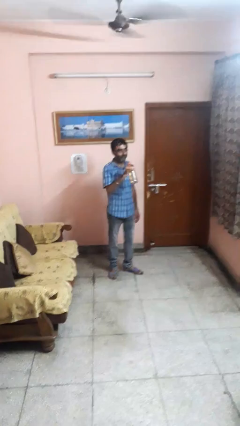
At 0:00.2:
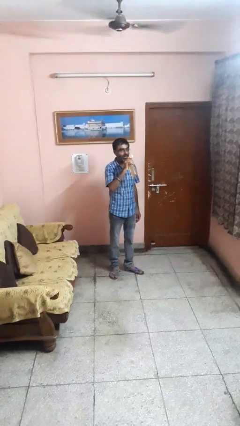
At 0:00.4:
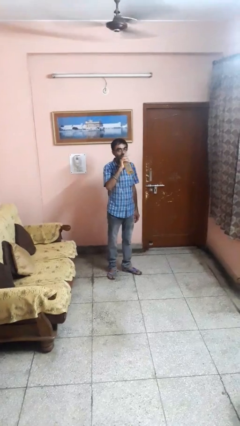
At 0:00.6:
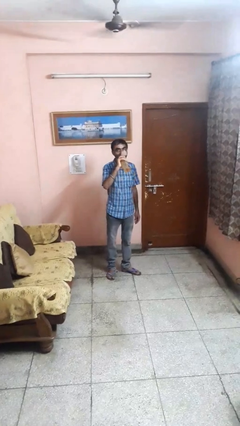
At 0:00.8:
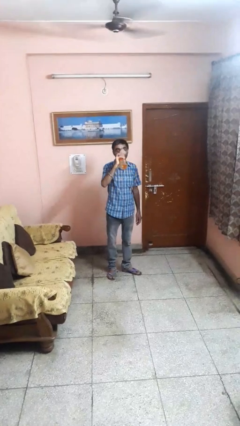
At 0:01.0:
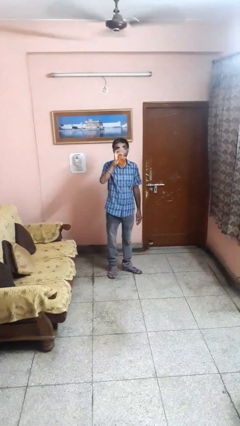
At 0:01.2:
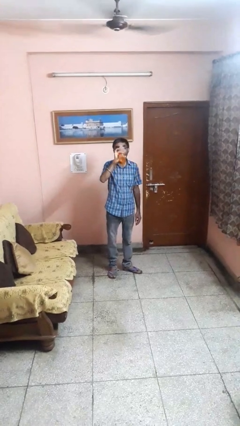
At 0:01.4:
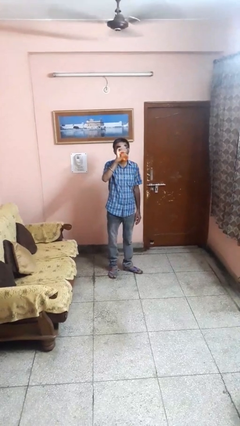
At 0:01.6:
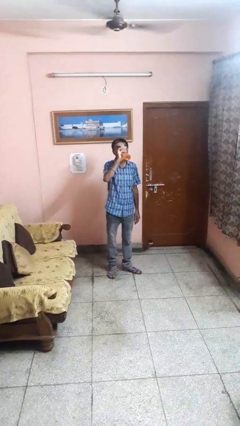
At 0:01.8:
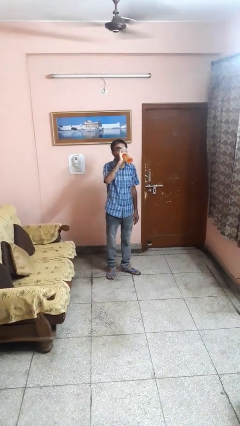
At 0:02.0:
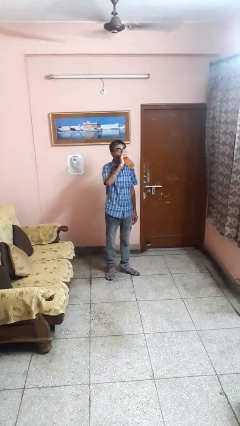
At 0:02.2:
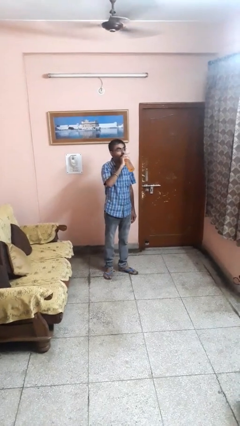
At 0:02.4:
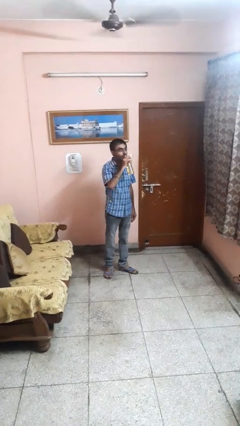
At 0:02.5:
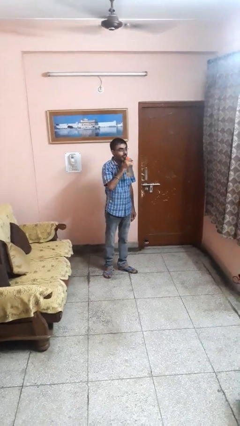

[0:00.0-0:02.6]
person drinks from bottle

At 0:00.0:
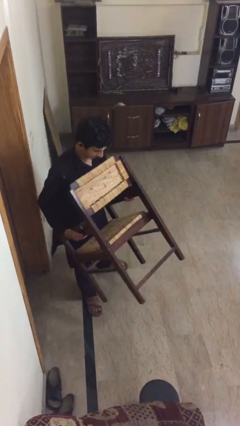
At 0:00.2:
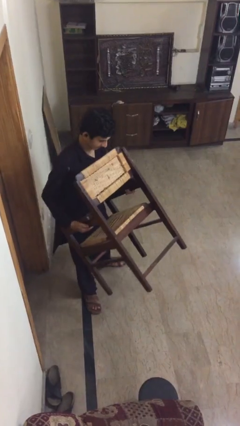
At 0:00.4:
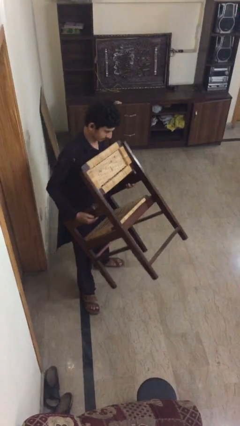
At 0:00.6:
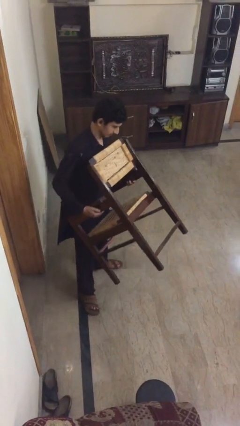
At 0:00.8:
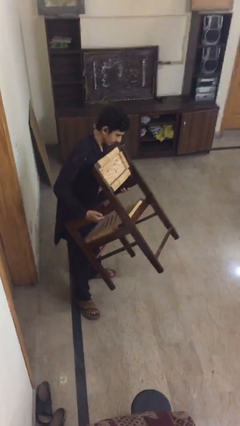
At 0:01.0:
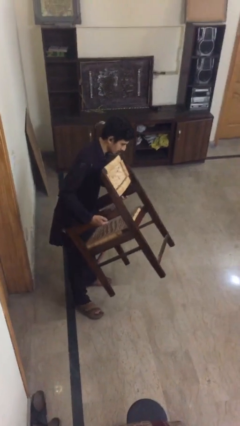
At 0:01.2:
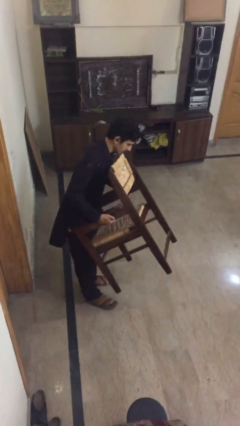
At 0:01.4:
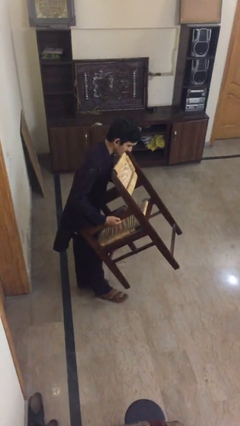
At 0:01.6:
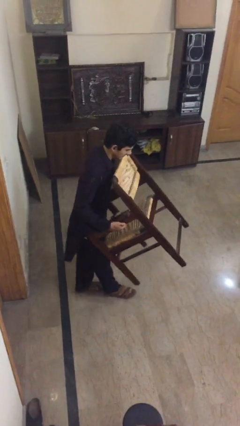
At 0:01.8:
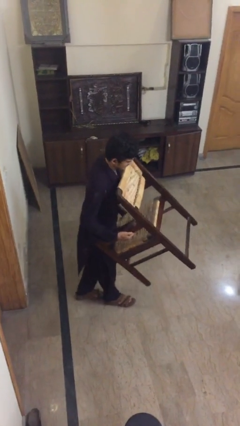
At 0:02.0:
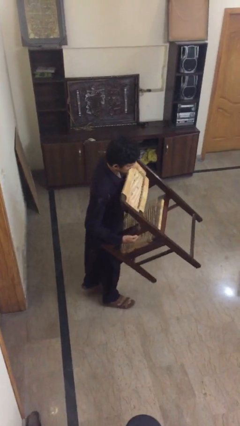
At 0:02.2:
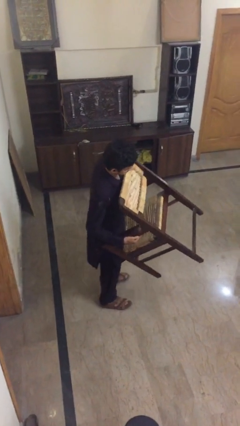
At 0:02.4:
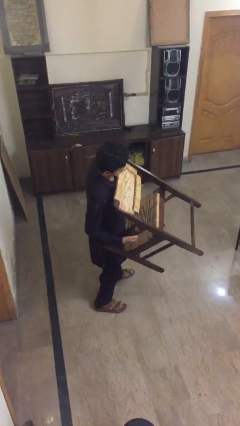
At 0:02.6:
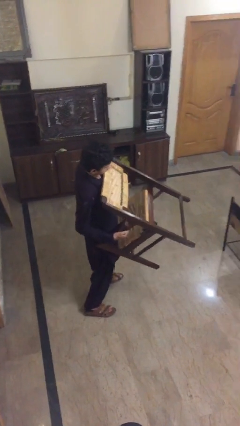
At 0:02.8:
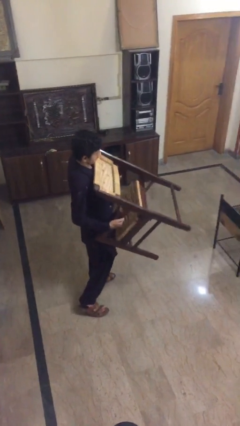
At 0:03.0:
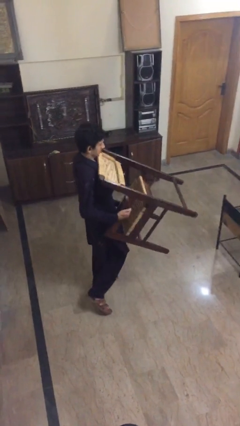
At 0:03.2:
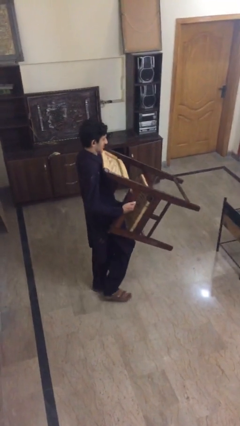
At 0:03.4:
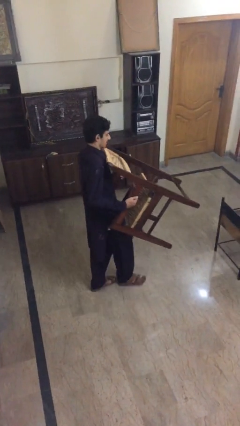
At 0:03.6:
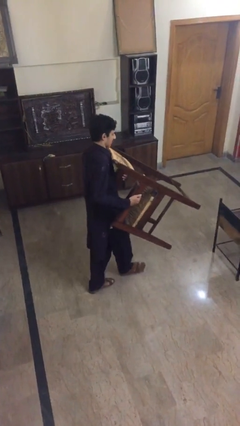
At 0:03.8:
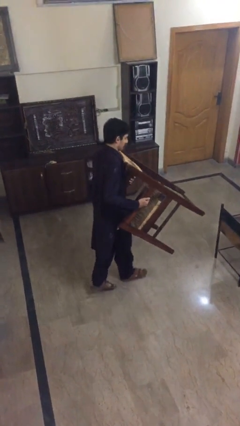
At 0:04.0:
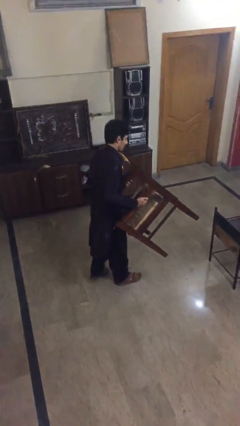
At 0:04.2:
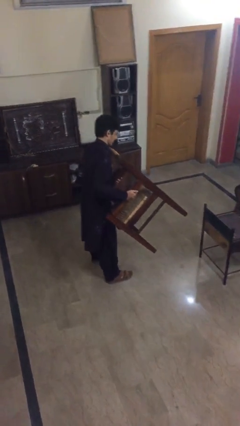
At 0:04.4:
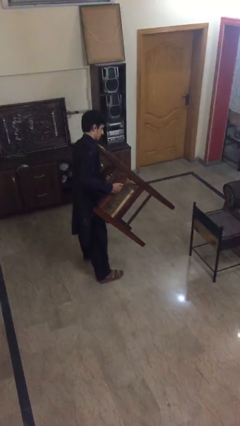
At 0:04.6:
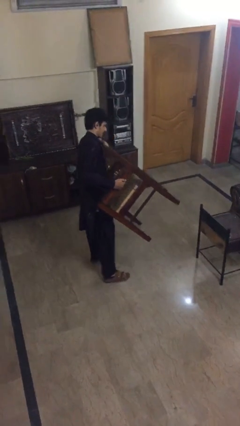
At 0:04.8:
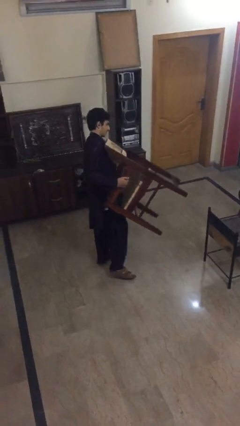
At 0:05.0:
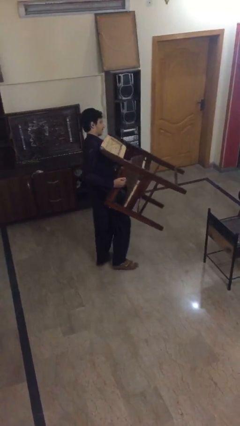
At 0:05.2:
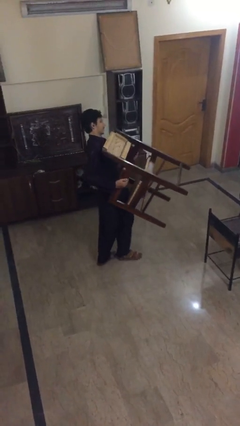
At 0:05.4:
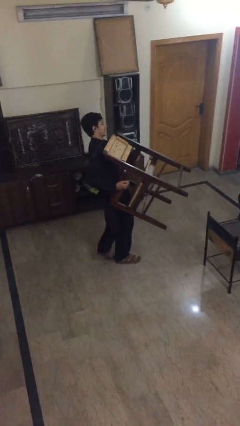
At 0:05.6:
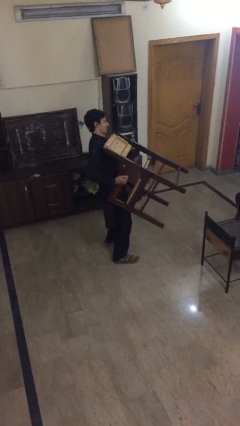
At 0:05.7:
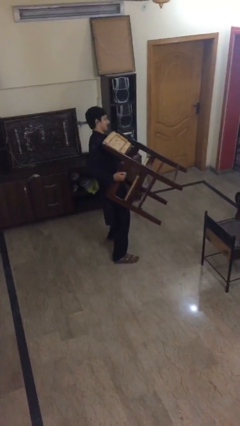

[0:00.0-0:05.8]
person carries heavy object

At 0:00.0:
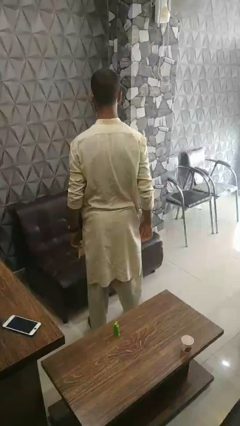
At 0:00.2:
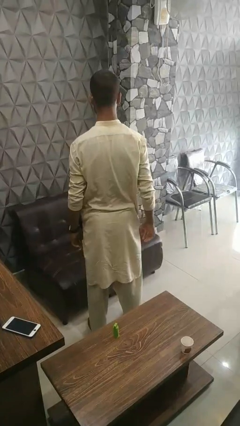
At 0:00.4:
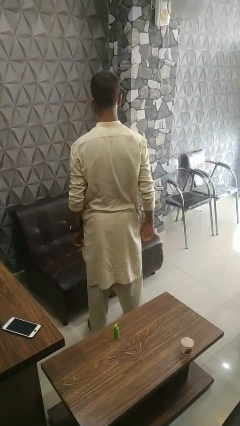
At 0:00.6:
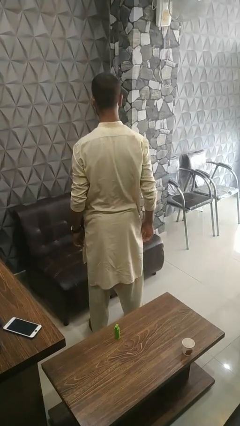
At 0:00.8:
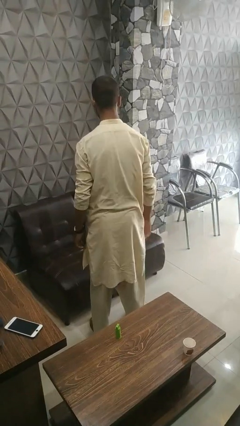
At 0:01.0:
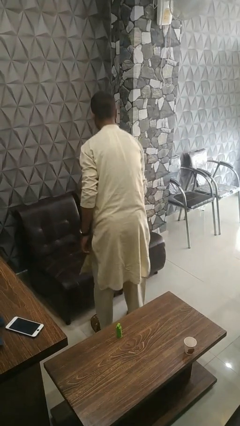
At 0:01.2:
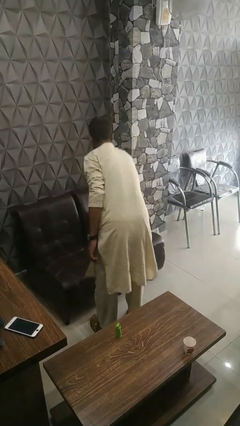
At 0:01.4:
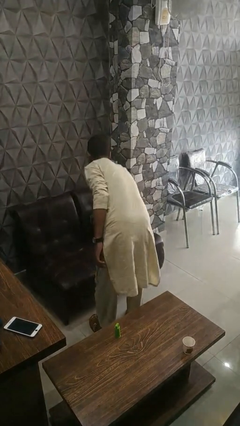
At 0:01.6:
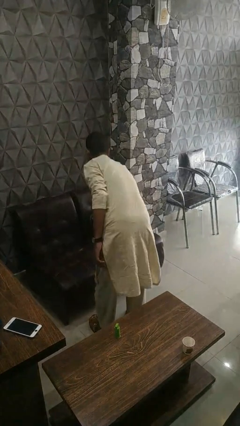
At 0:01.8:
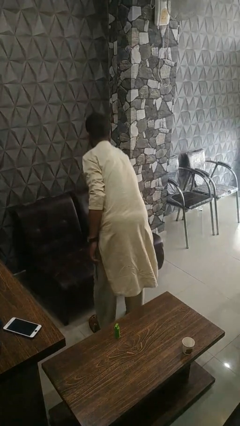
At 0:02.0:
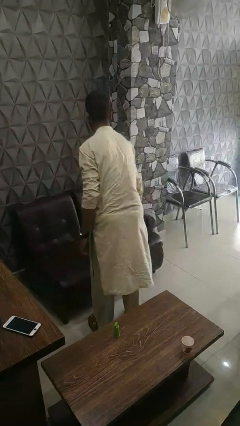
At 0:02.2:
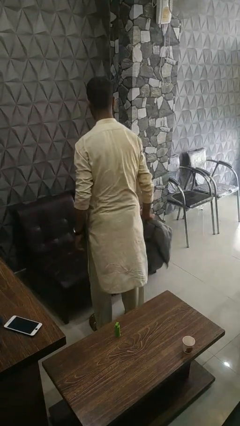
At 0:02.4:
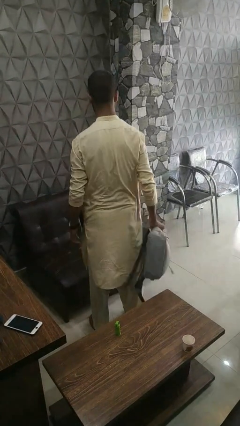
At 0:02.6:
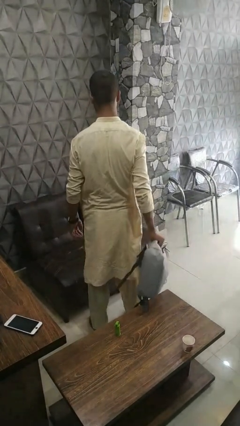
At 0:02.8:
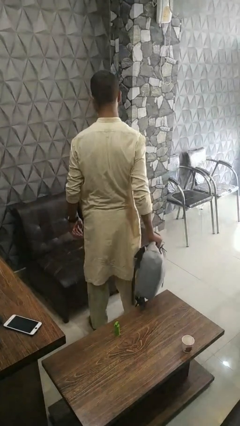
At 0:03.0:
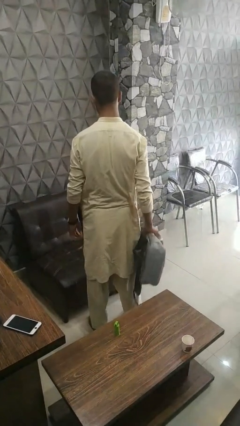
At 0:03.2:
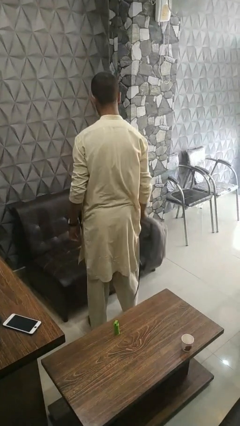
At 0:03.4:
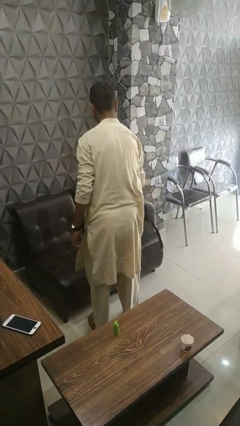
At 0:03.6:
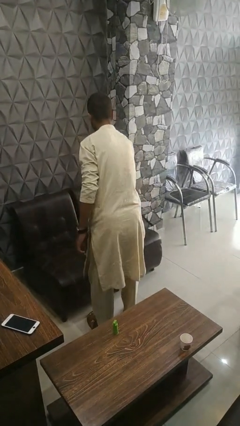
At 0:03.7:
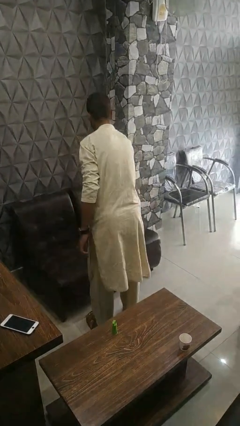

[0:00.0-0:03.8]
person searches in couch

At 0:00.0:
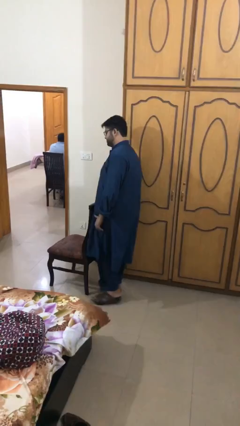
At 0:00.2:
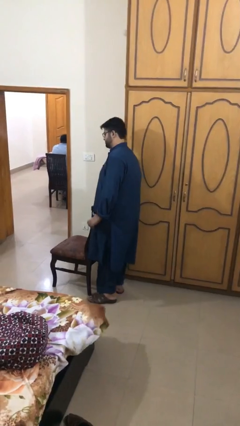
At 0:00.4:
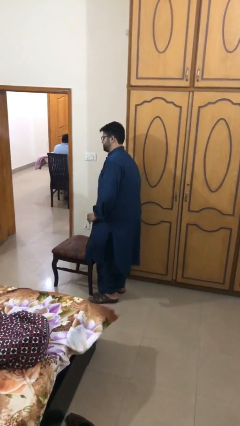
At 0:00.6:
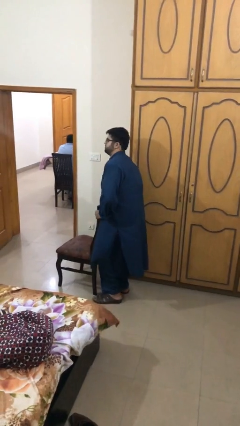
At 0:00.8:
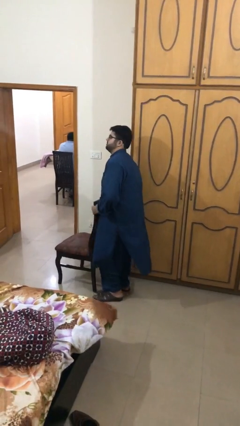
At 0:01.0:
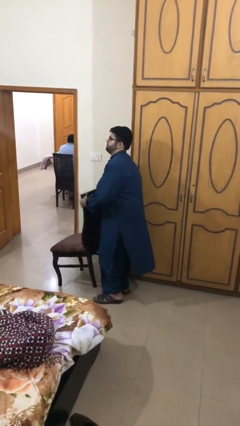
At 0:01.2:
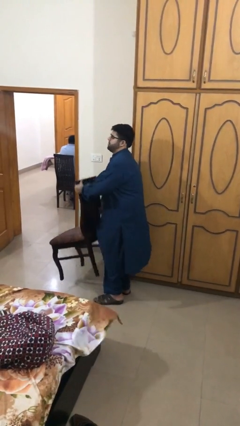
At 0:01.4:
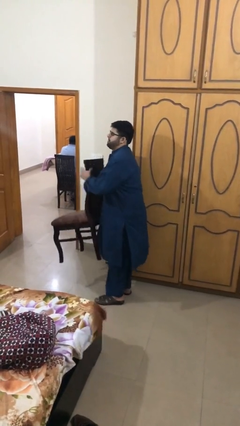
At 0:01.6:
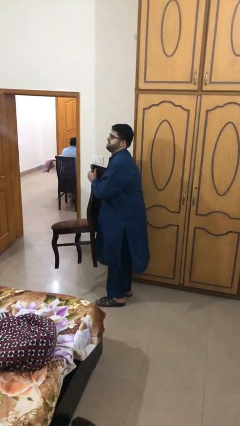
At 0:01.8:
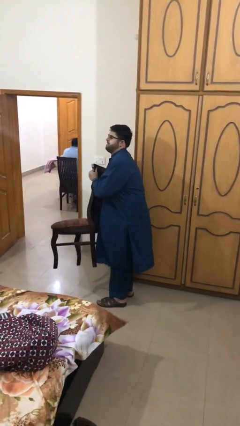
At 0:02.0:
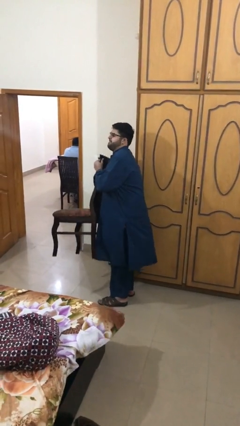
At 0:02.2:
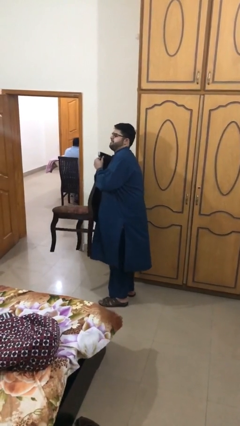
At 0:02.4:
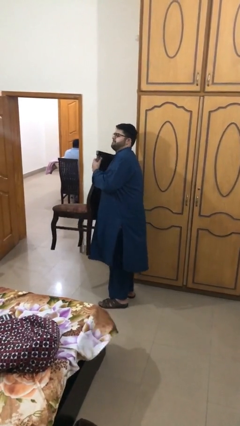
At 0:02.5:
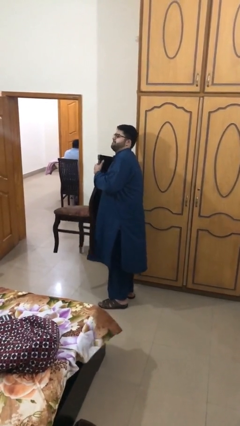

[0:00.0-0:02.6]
person picks up object from floor

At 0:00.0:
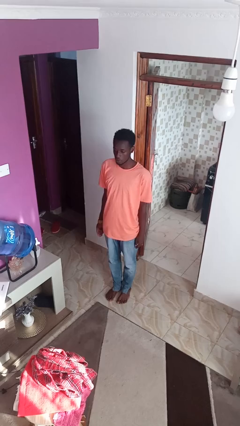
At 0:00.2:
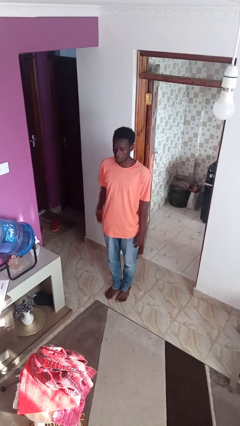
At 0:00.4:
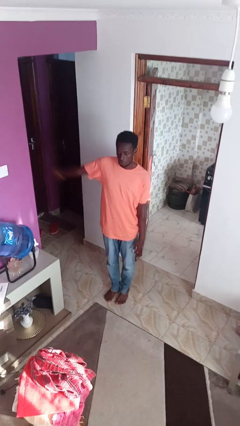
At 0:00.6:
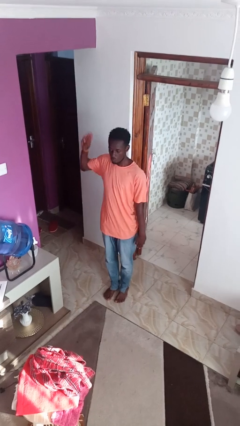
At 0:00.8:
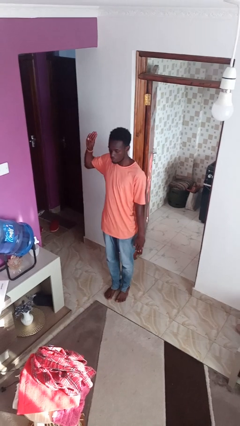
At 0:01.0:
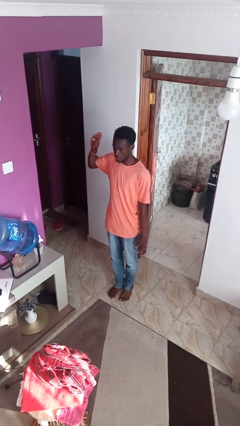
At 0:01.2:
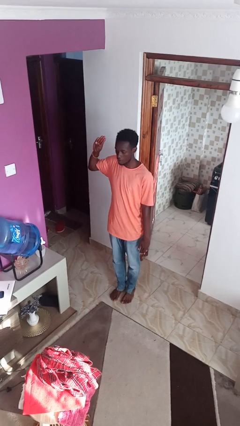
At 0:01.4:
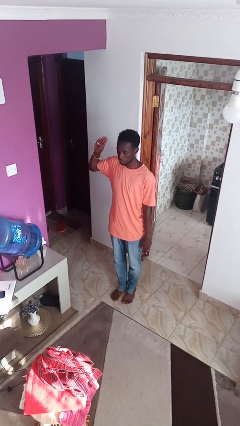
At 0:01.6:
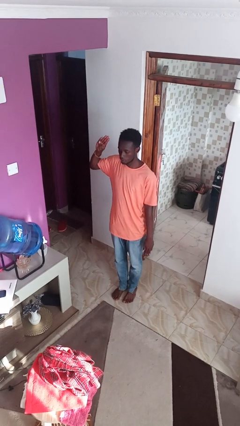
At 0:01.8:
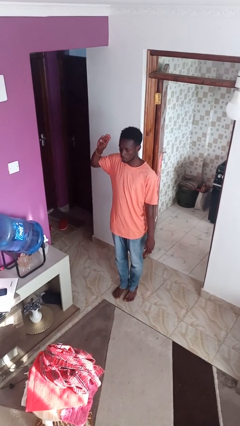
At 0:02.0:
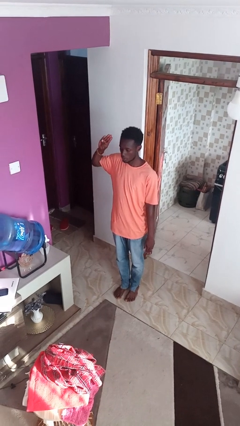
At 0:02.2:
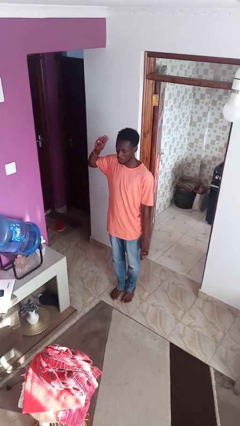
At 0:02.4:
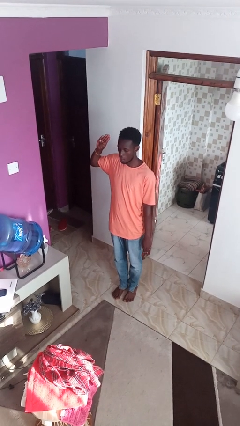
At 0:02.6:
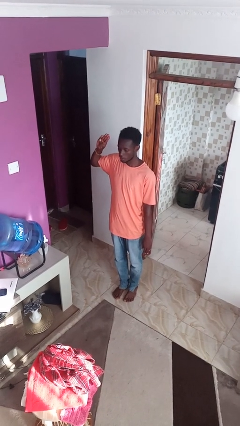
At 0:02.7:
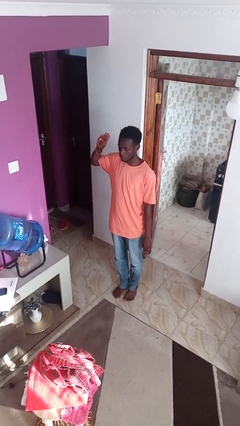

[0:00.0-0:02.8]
person salutes

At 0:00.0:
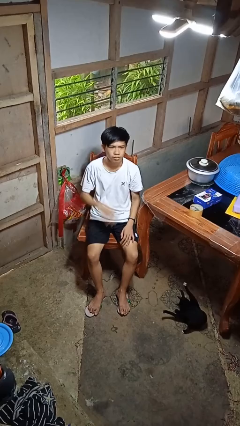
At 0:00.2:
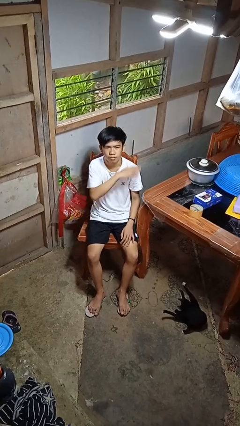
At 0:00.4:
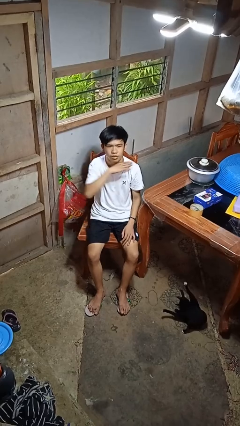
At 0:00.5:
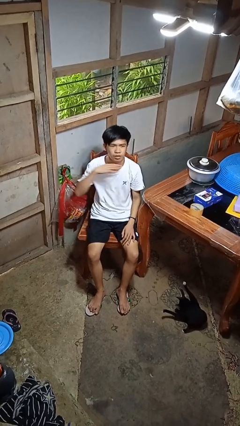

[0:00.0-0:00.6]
person gestures cut
